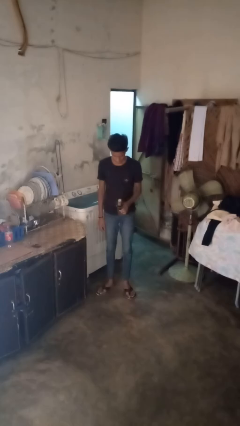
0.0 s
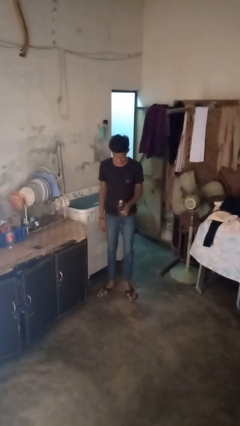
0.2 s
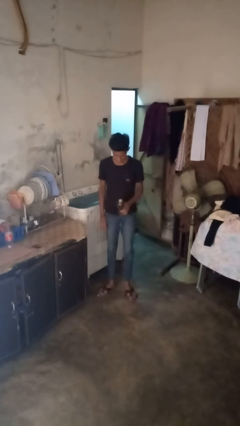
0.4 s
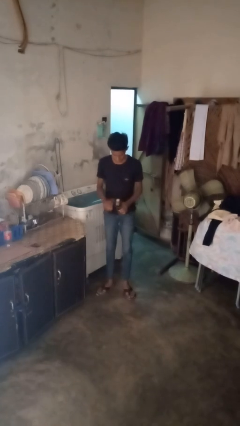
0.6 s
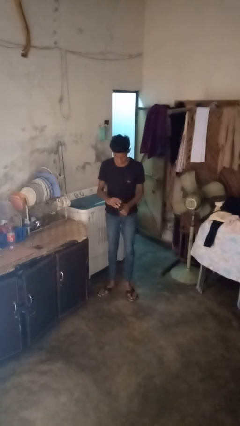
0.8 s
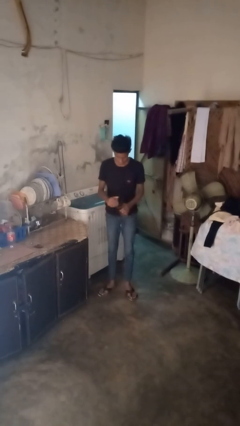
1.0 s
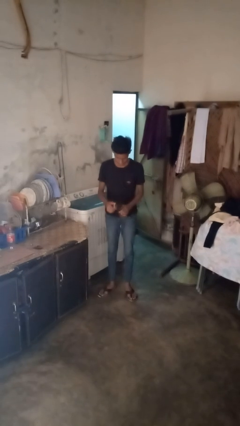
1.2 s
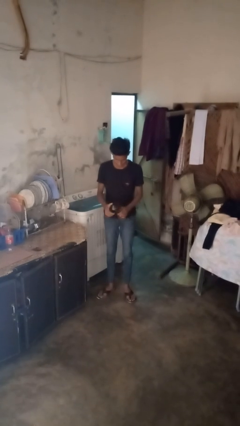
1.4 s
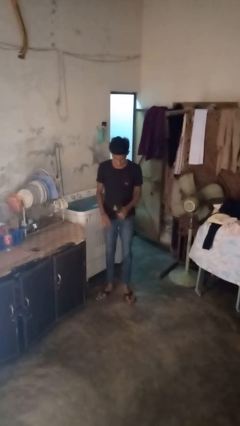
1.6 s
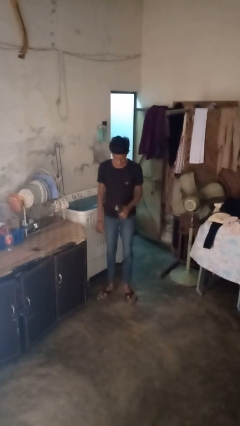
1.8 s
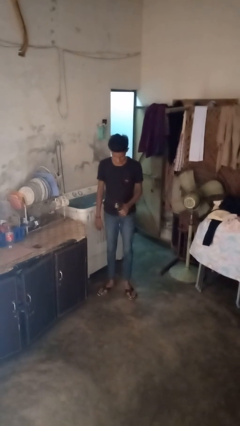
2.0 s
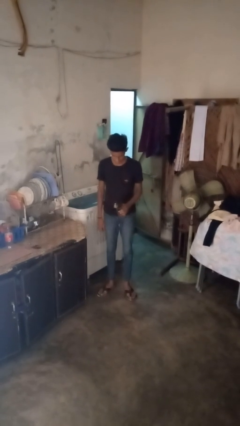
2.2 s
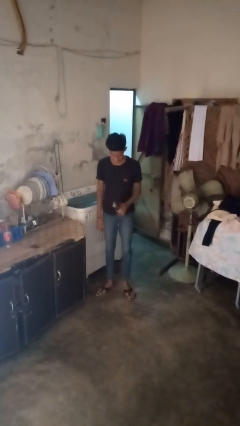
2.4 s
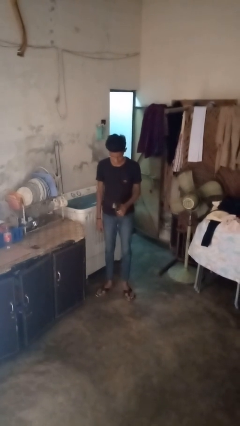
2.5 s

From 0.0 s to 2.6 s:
person opens can with can opener

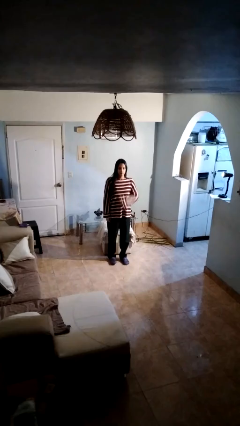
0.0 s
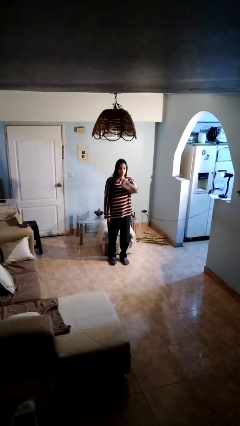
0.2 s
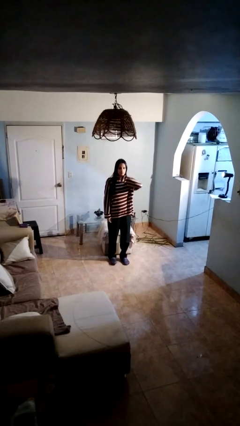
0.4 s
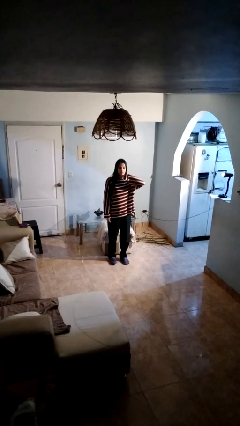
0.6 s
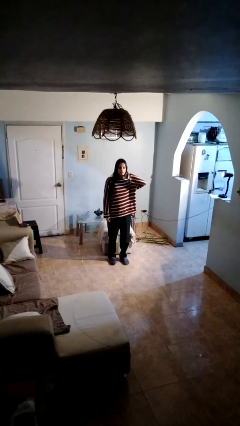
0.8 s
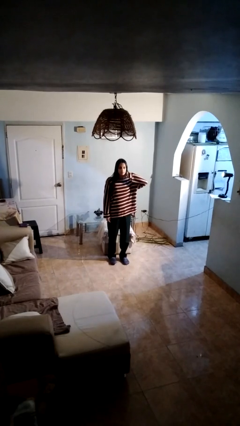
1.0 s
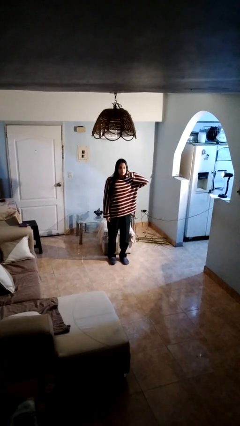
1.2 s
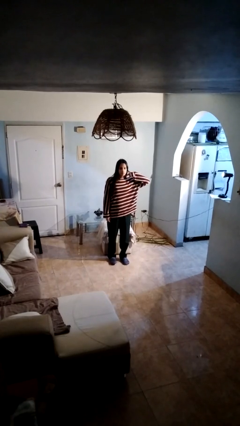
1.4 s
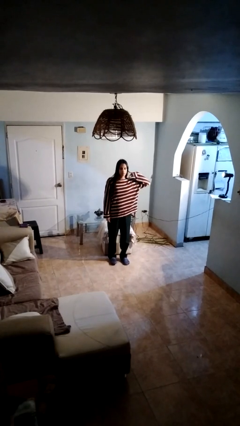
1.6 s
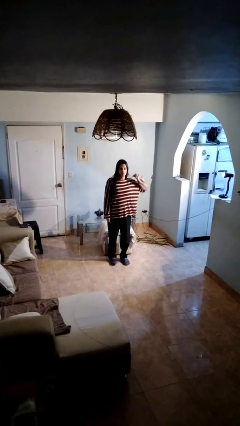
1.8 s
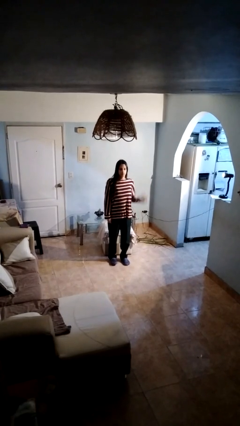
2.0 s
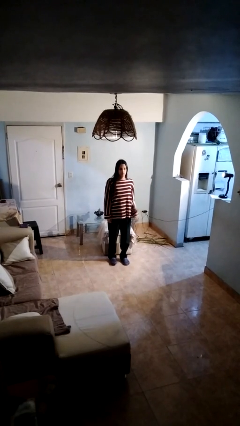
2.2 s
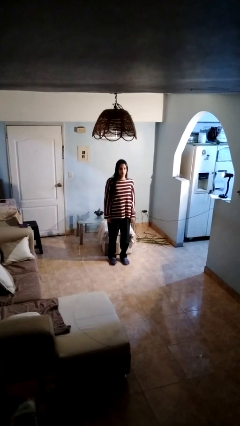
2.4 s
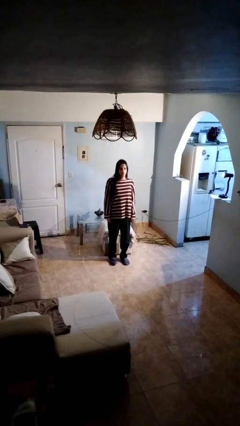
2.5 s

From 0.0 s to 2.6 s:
person gestures cut

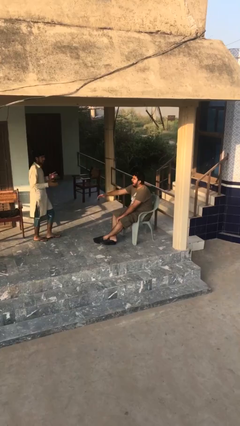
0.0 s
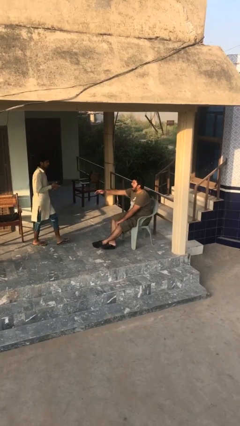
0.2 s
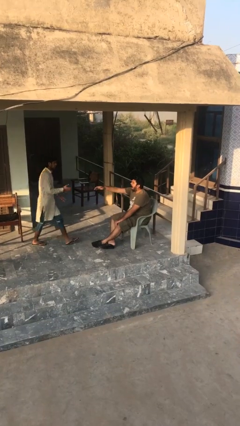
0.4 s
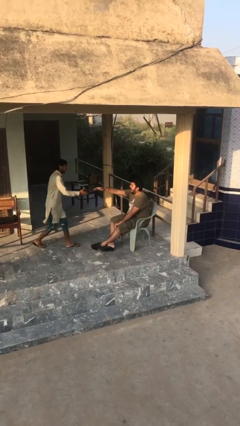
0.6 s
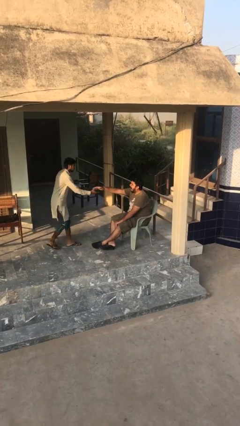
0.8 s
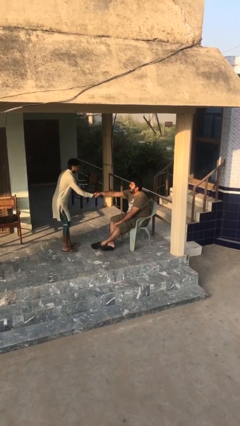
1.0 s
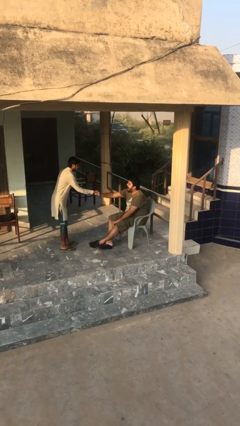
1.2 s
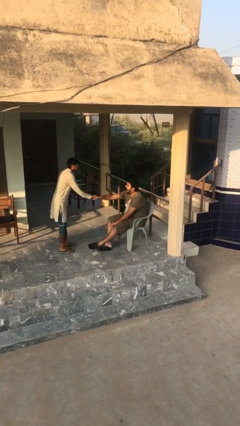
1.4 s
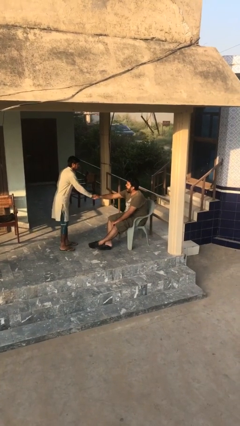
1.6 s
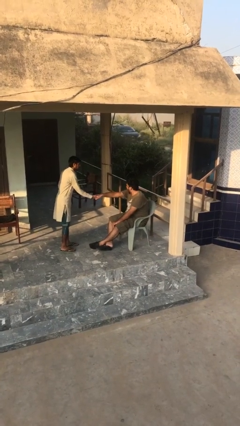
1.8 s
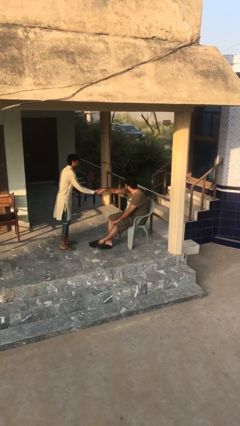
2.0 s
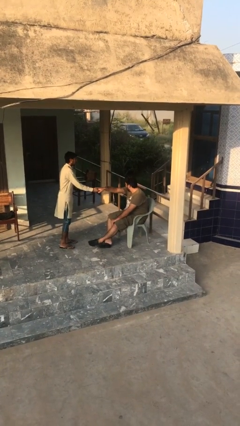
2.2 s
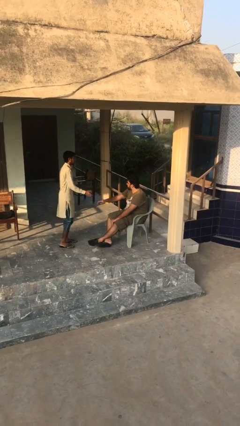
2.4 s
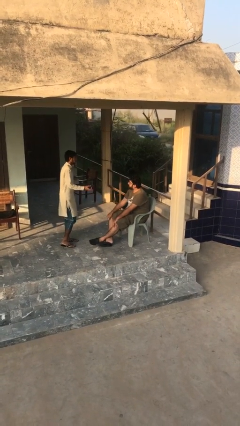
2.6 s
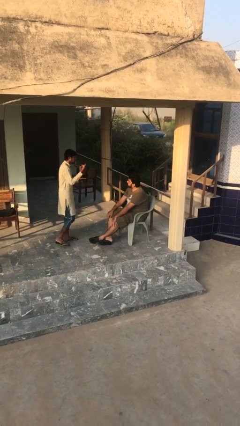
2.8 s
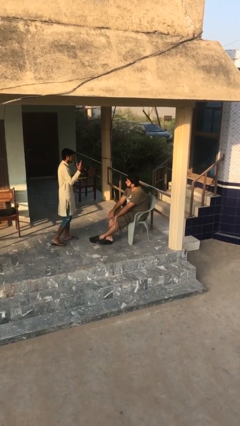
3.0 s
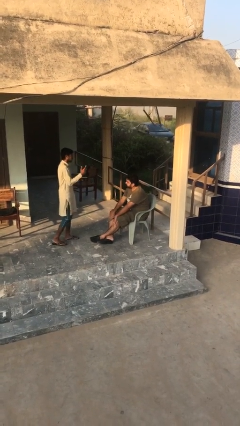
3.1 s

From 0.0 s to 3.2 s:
person shakes hand

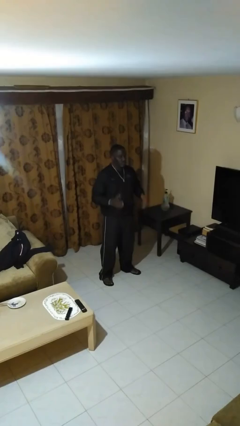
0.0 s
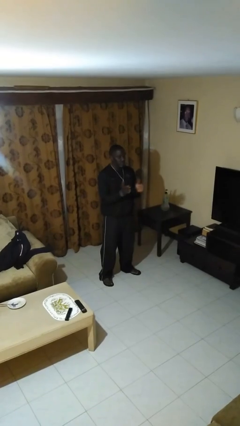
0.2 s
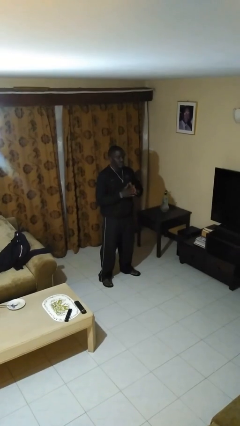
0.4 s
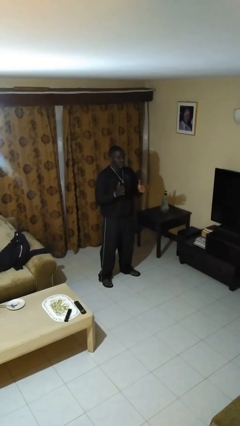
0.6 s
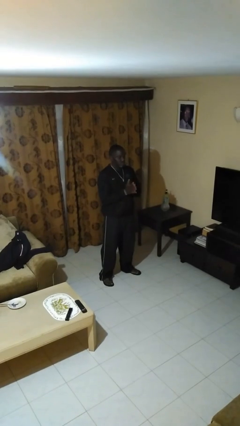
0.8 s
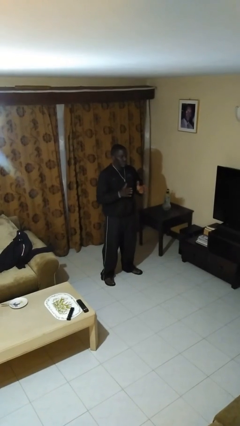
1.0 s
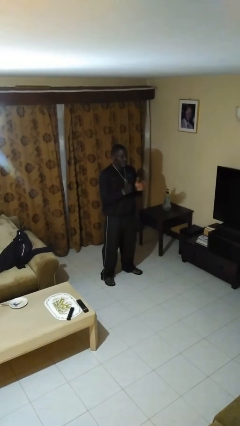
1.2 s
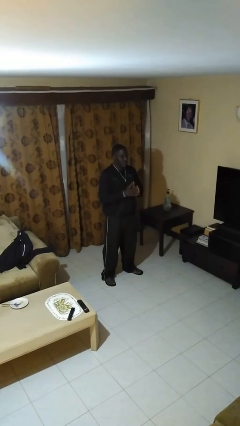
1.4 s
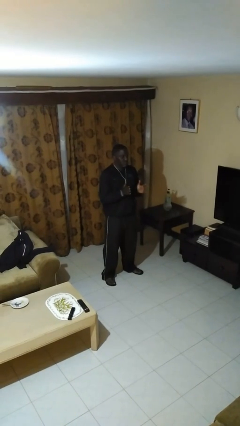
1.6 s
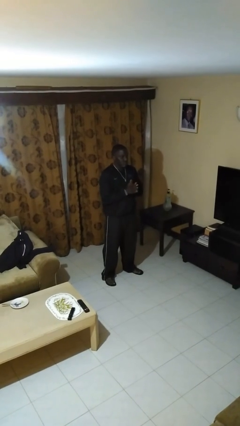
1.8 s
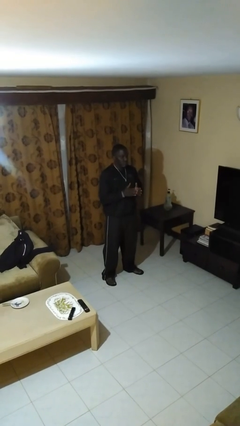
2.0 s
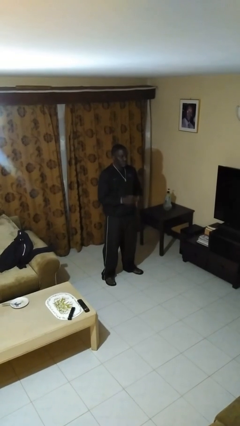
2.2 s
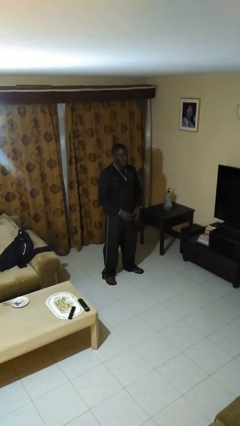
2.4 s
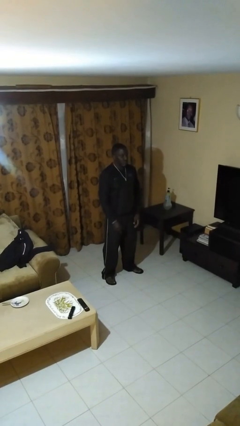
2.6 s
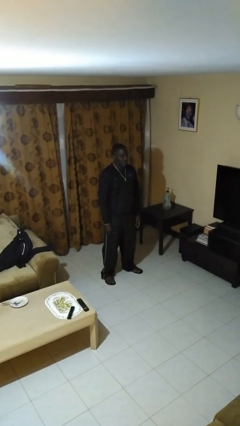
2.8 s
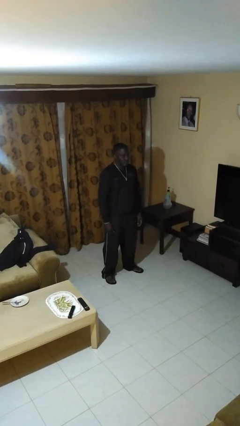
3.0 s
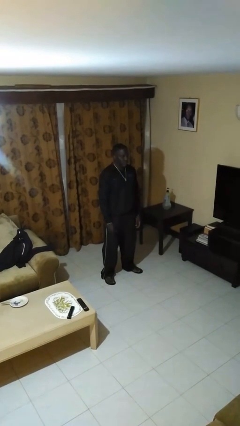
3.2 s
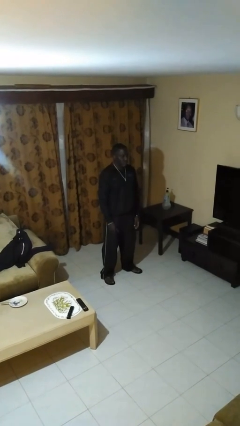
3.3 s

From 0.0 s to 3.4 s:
person claps hands

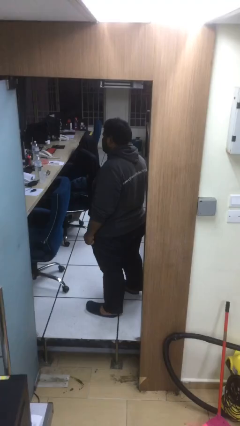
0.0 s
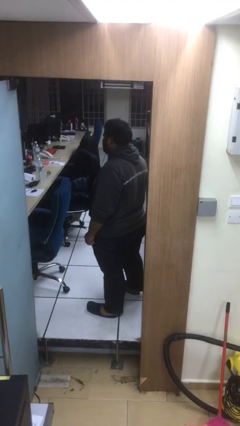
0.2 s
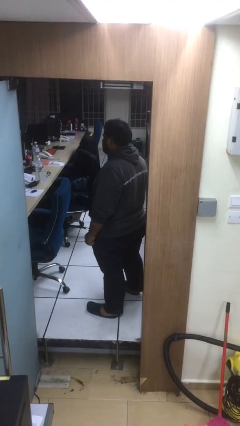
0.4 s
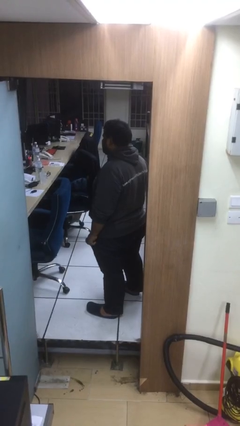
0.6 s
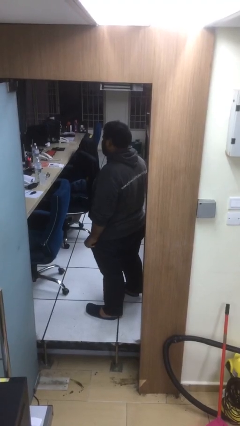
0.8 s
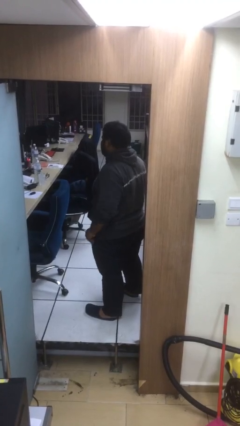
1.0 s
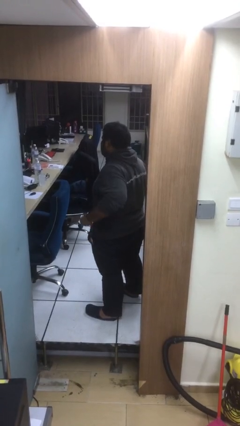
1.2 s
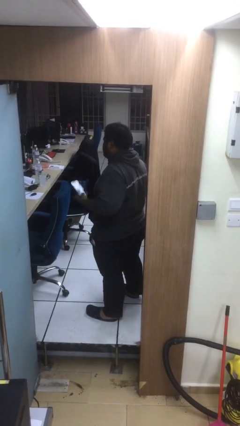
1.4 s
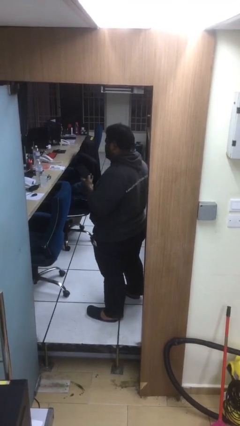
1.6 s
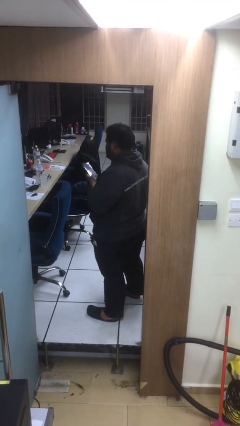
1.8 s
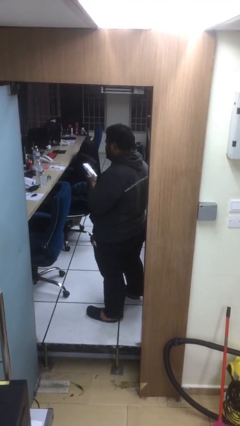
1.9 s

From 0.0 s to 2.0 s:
person takes phone from pocket

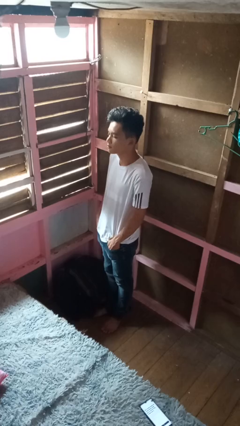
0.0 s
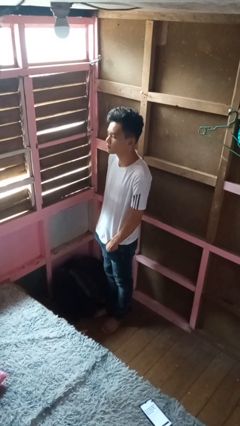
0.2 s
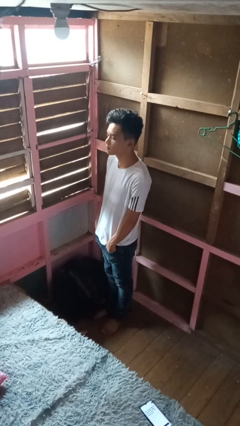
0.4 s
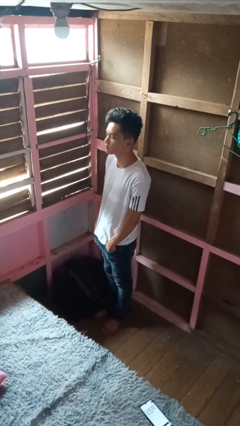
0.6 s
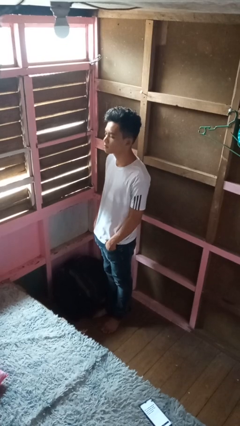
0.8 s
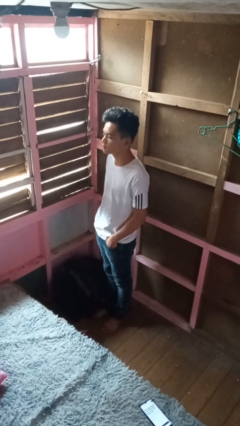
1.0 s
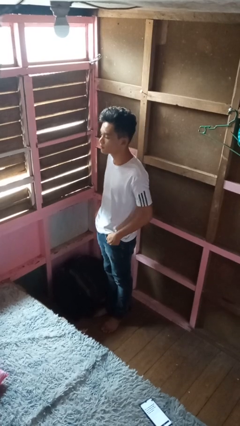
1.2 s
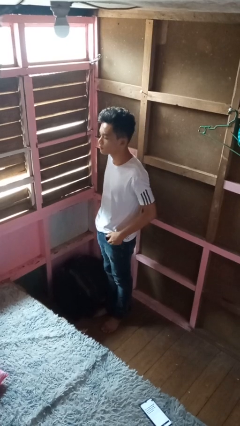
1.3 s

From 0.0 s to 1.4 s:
person puts hands in back pockets

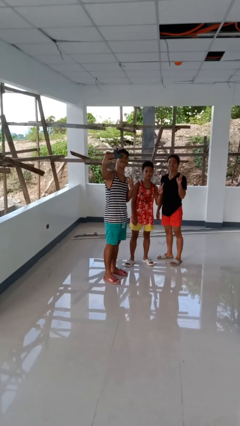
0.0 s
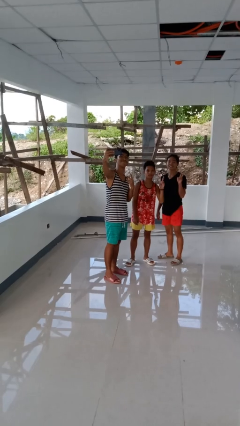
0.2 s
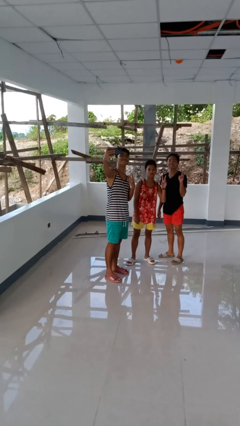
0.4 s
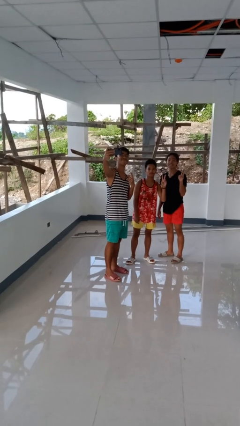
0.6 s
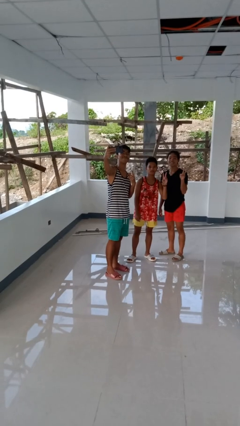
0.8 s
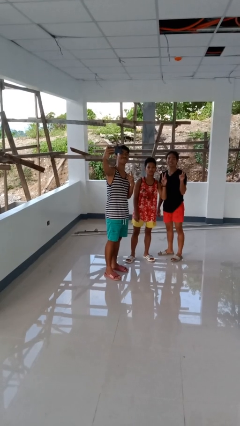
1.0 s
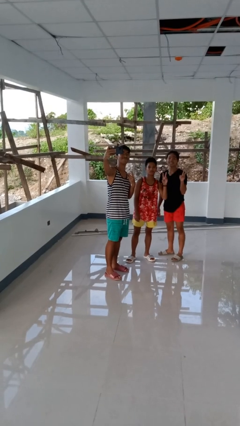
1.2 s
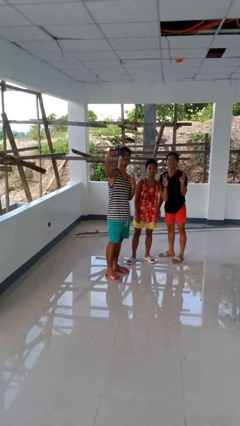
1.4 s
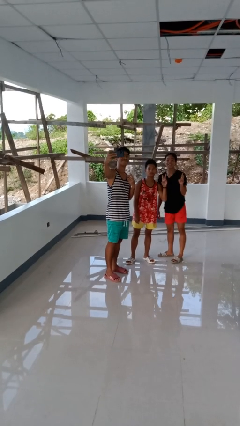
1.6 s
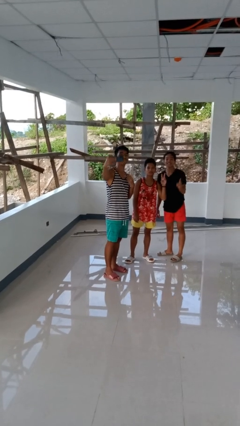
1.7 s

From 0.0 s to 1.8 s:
person takes selfie with person
